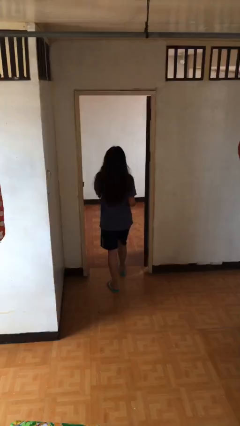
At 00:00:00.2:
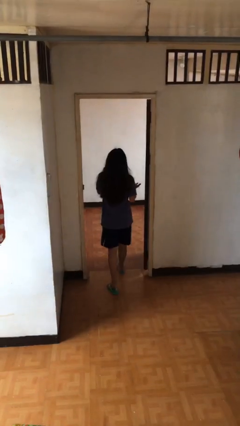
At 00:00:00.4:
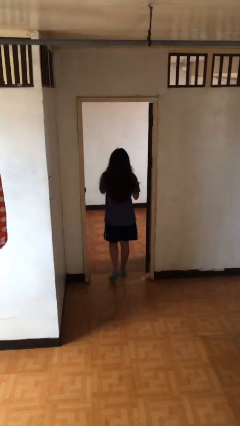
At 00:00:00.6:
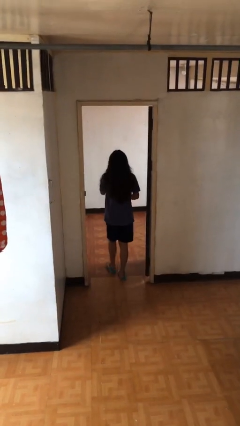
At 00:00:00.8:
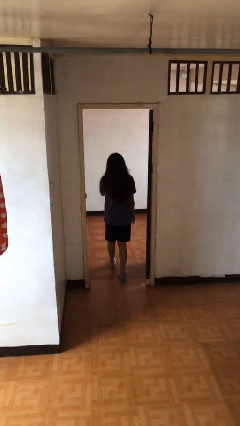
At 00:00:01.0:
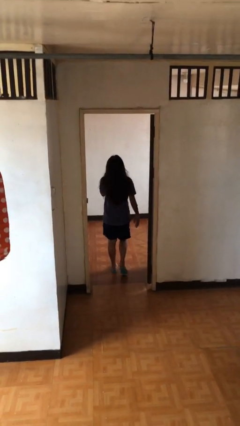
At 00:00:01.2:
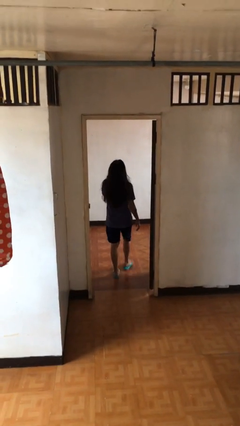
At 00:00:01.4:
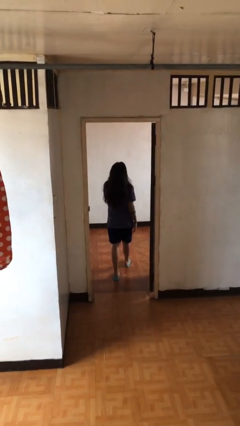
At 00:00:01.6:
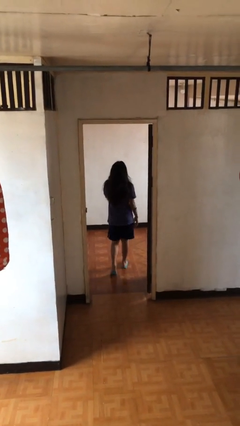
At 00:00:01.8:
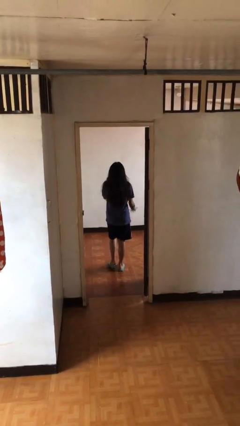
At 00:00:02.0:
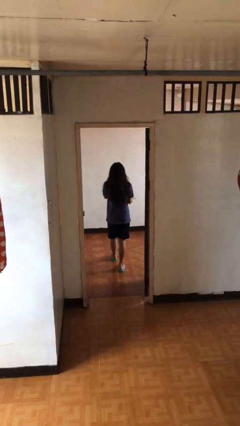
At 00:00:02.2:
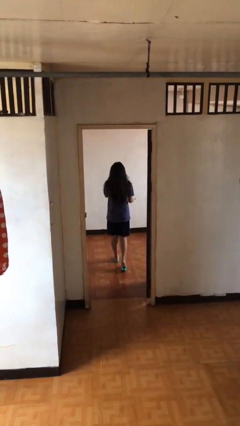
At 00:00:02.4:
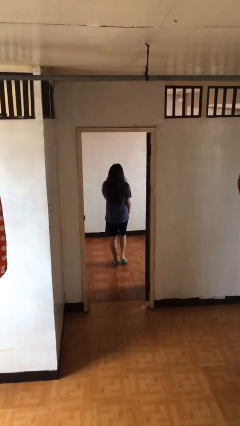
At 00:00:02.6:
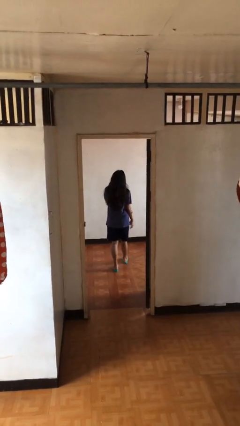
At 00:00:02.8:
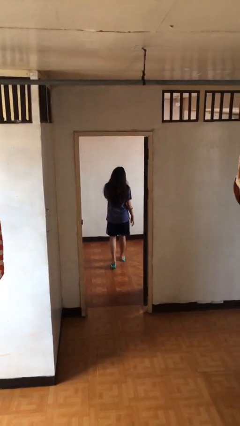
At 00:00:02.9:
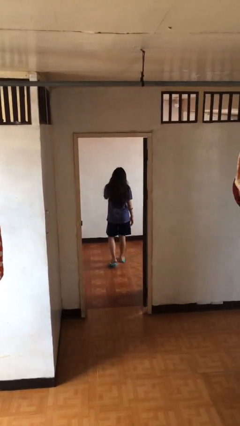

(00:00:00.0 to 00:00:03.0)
person exits scene through structure

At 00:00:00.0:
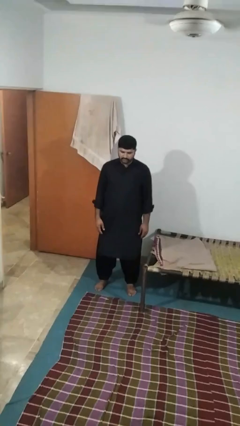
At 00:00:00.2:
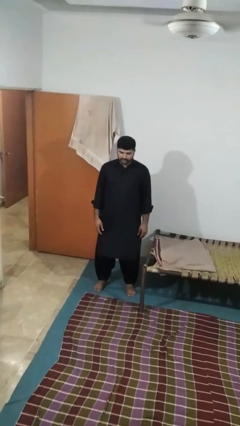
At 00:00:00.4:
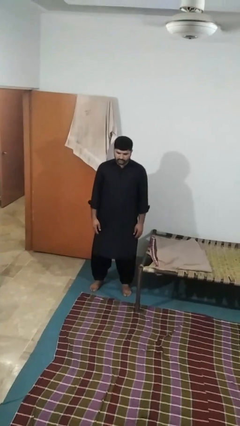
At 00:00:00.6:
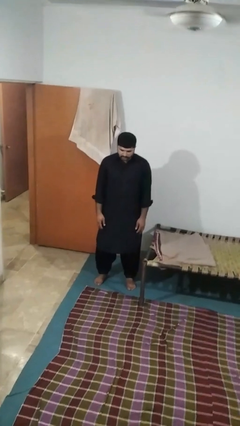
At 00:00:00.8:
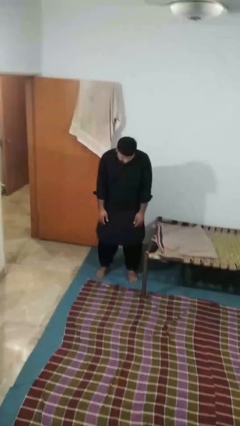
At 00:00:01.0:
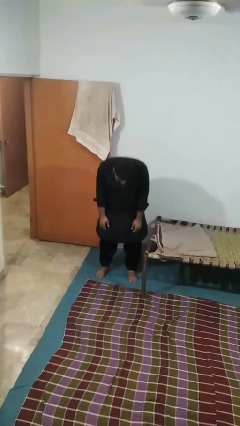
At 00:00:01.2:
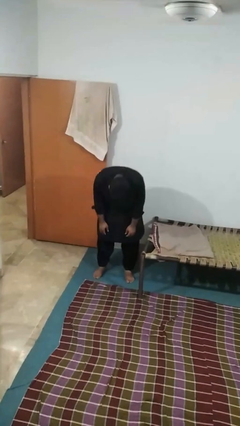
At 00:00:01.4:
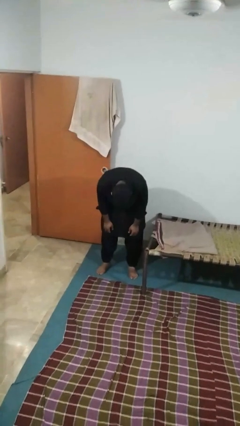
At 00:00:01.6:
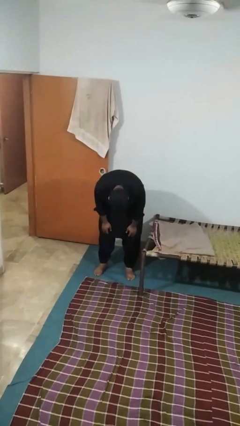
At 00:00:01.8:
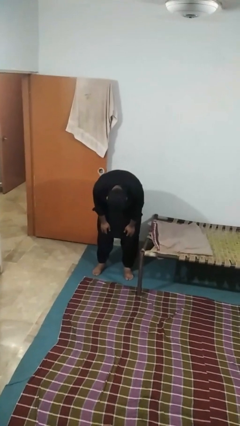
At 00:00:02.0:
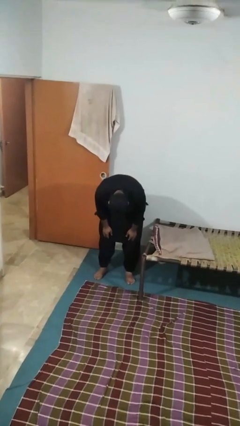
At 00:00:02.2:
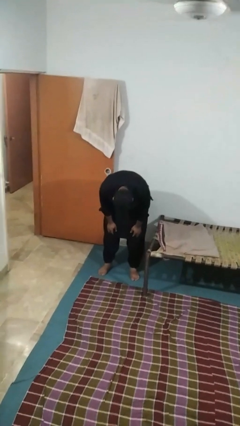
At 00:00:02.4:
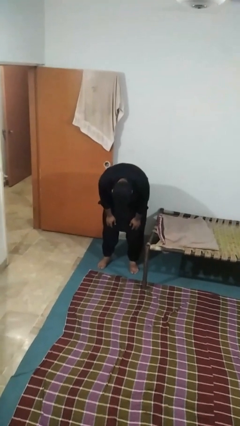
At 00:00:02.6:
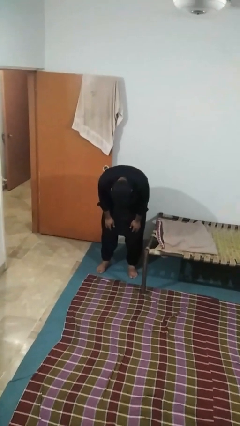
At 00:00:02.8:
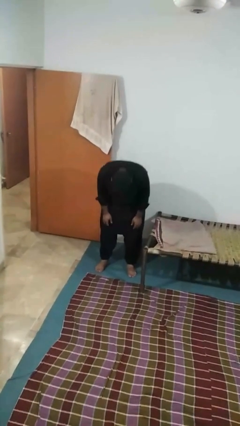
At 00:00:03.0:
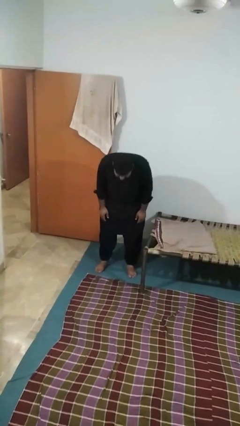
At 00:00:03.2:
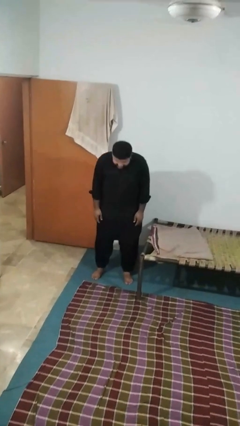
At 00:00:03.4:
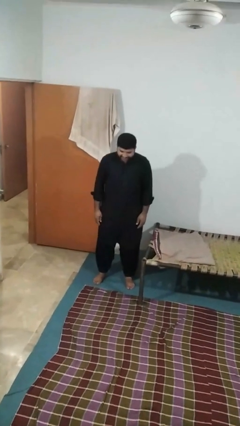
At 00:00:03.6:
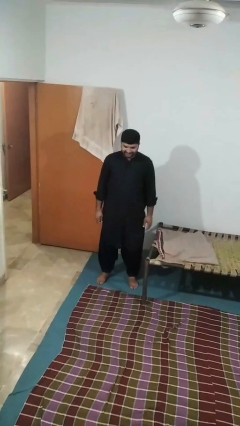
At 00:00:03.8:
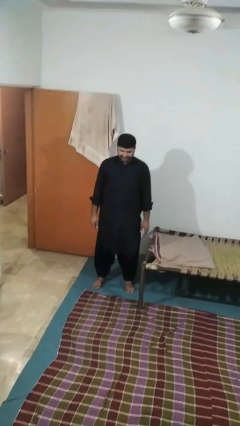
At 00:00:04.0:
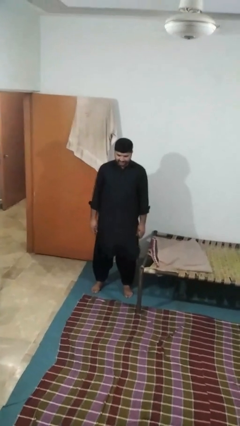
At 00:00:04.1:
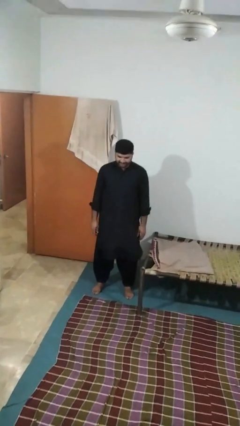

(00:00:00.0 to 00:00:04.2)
person bows

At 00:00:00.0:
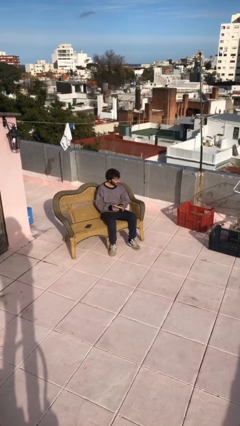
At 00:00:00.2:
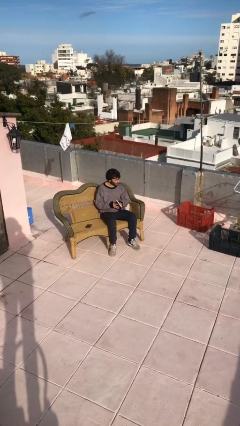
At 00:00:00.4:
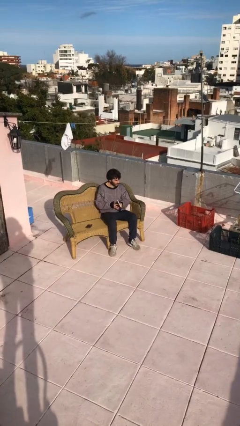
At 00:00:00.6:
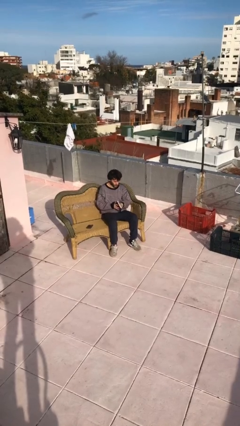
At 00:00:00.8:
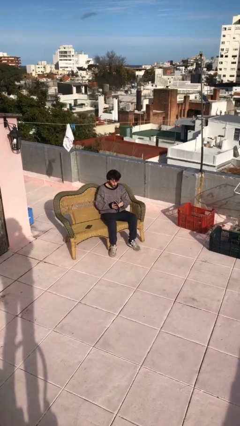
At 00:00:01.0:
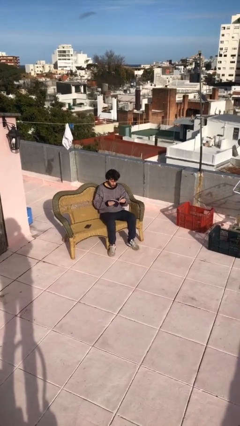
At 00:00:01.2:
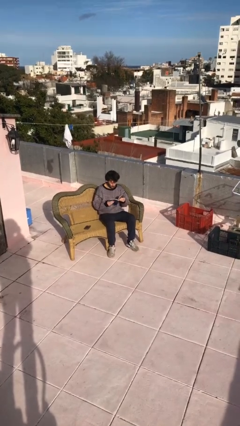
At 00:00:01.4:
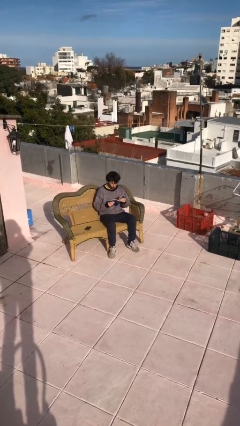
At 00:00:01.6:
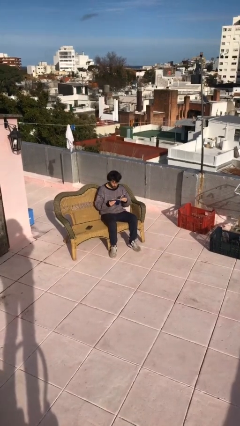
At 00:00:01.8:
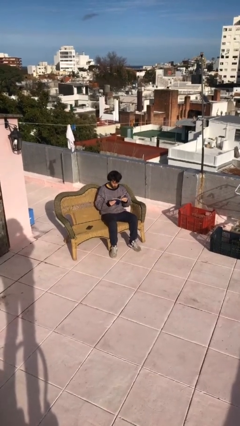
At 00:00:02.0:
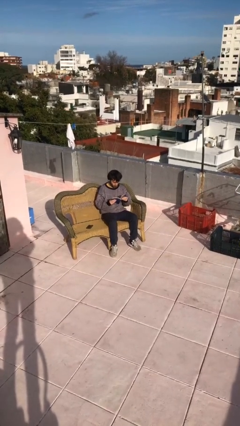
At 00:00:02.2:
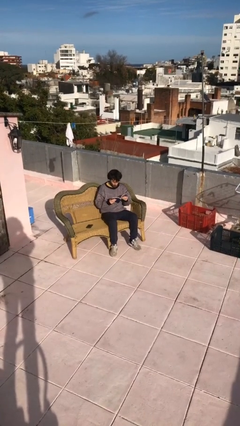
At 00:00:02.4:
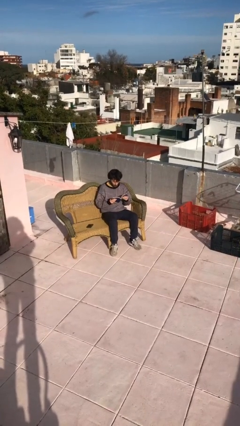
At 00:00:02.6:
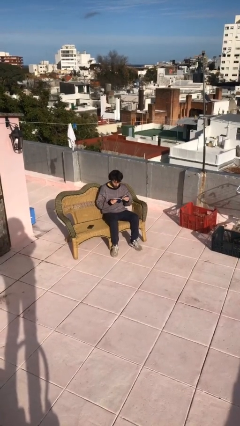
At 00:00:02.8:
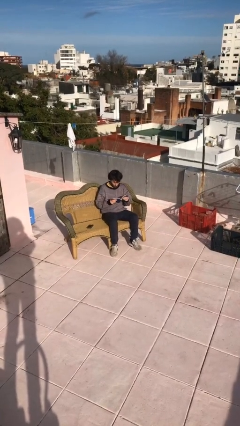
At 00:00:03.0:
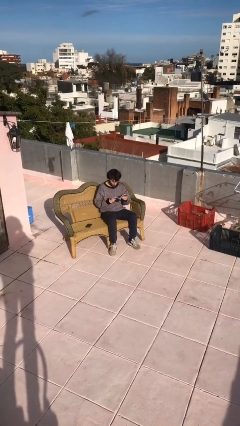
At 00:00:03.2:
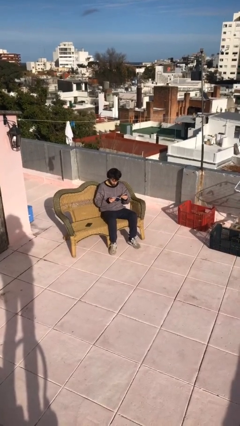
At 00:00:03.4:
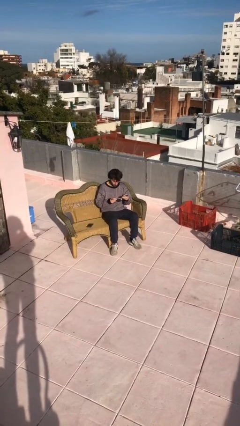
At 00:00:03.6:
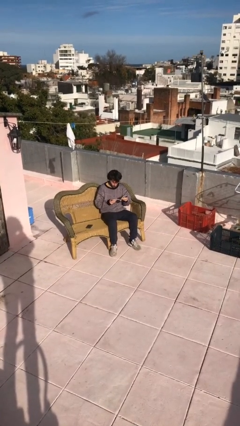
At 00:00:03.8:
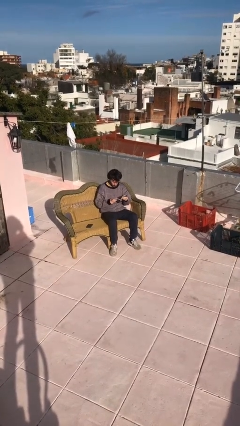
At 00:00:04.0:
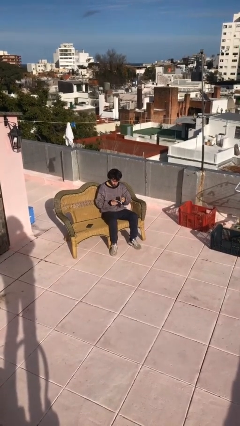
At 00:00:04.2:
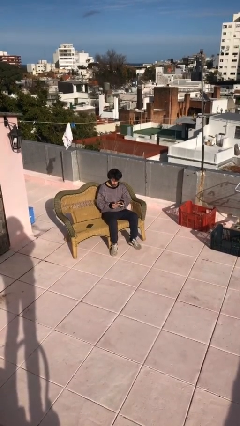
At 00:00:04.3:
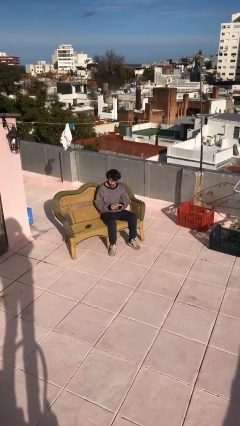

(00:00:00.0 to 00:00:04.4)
person reads book

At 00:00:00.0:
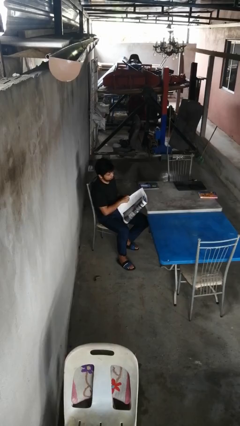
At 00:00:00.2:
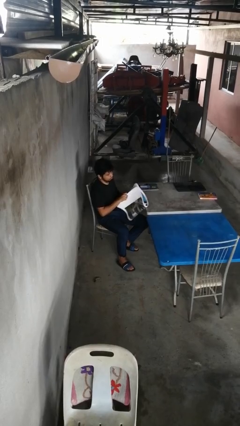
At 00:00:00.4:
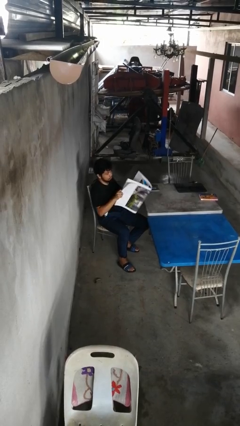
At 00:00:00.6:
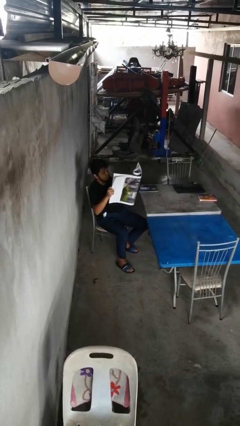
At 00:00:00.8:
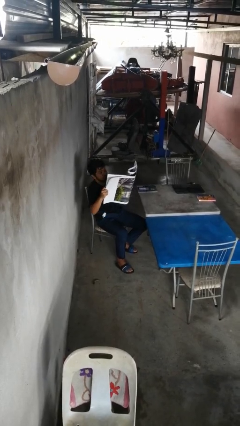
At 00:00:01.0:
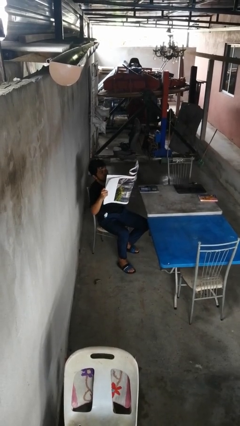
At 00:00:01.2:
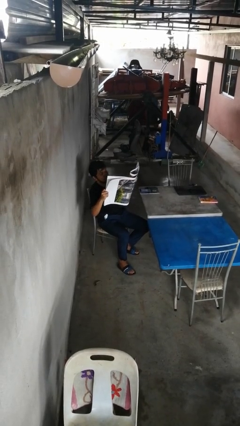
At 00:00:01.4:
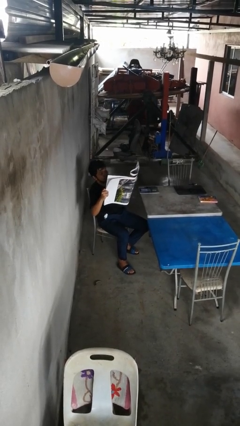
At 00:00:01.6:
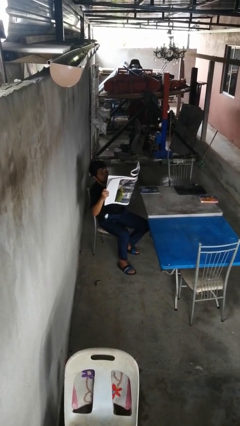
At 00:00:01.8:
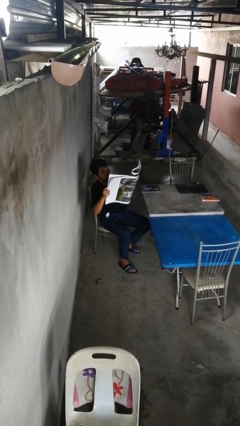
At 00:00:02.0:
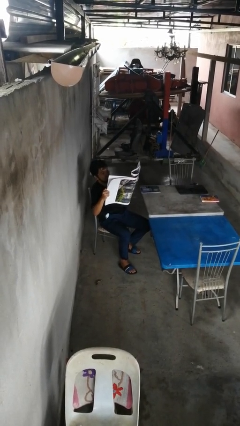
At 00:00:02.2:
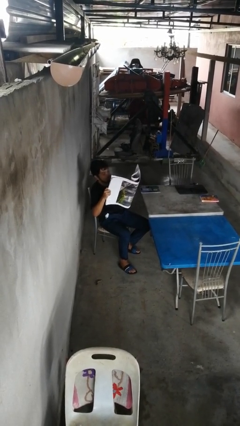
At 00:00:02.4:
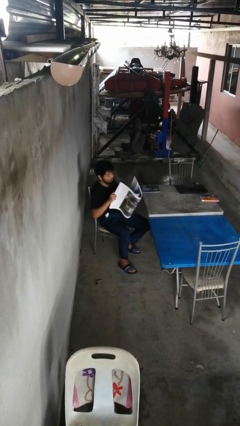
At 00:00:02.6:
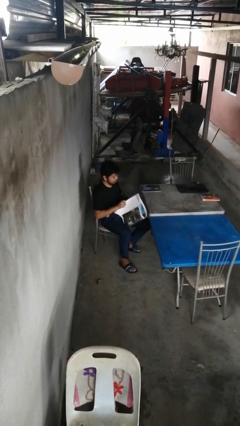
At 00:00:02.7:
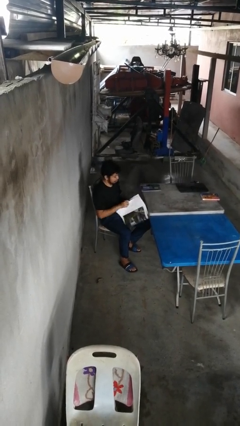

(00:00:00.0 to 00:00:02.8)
person reads newspaper

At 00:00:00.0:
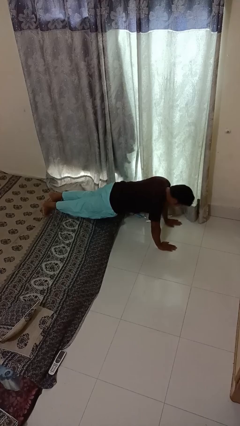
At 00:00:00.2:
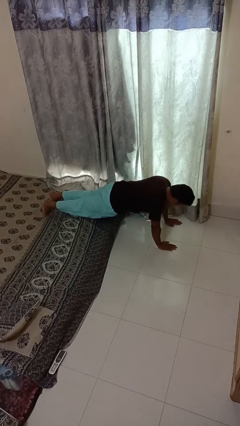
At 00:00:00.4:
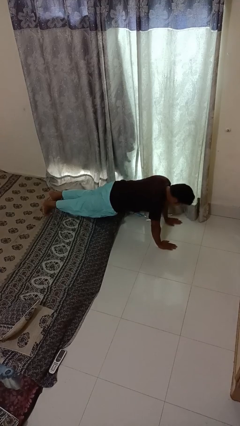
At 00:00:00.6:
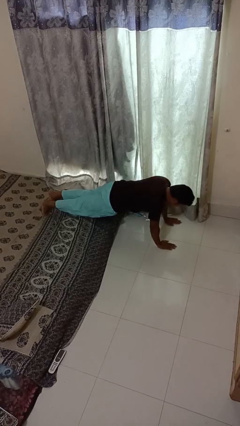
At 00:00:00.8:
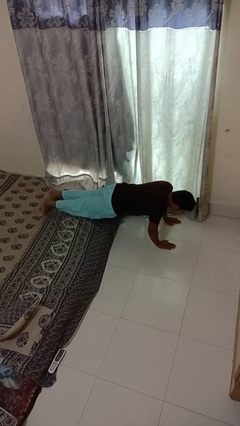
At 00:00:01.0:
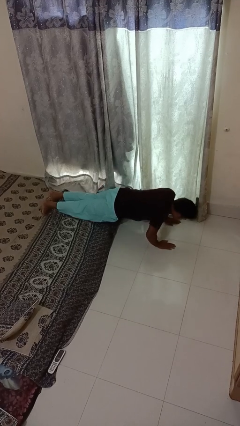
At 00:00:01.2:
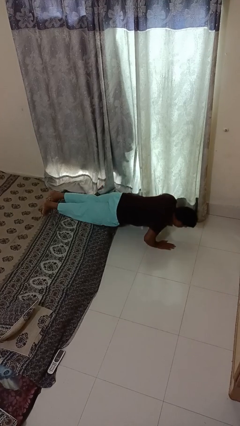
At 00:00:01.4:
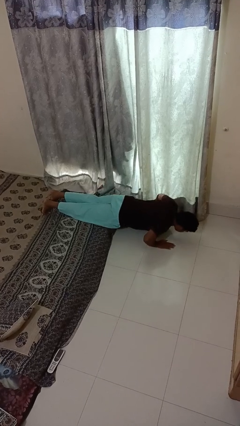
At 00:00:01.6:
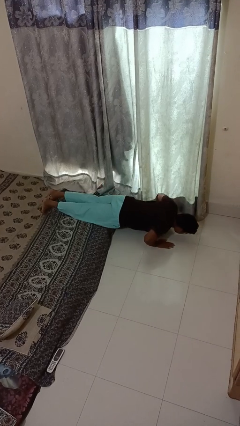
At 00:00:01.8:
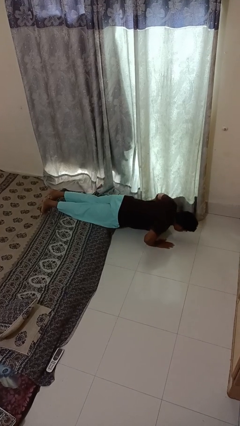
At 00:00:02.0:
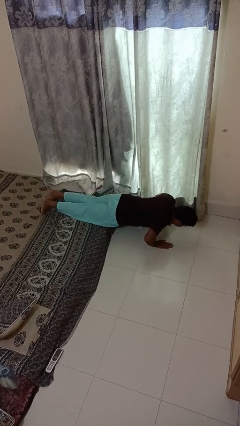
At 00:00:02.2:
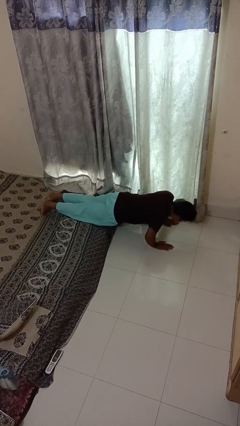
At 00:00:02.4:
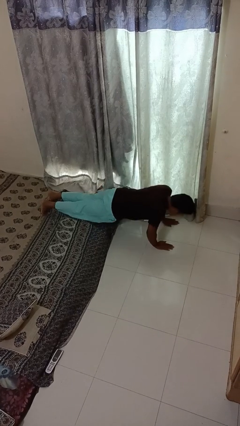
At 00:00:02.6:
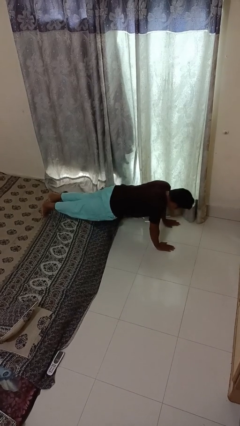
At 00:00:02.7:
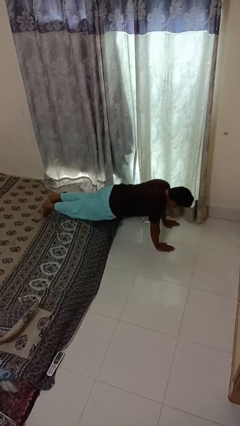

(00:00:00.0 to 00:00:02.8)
person exercises with pushup
